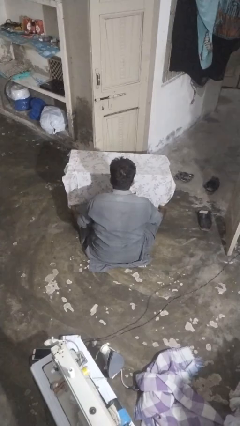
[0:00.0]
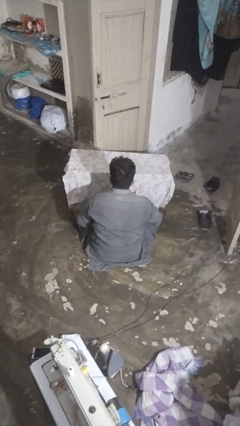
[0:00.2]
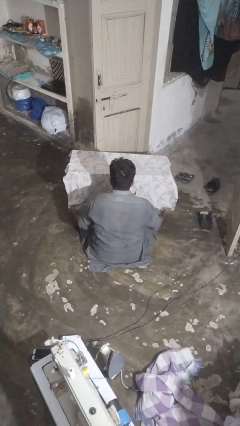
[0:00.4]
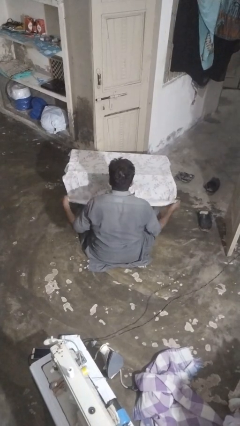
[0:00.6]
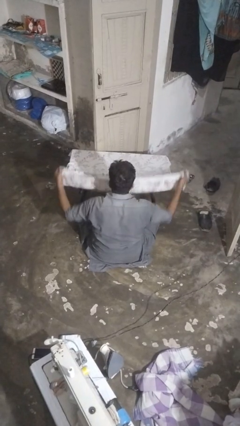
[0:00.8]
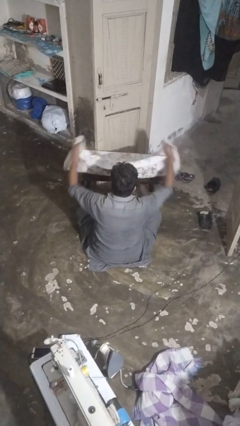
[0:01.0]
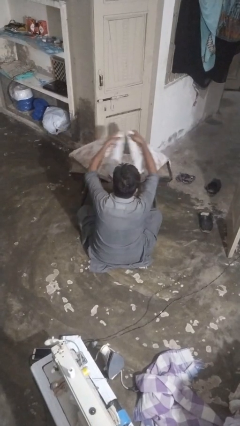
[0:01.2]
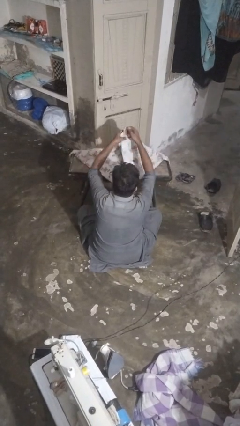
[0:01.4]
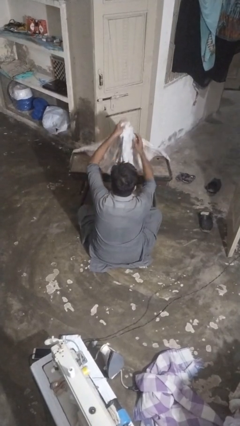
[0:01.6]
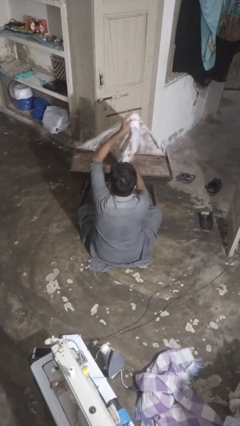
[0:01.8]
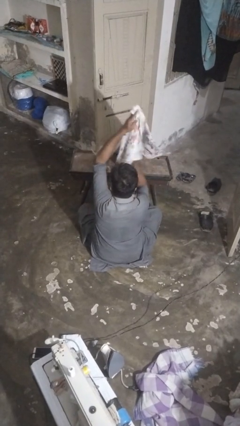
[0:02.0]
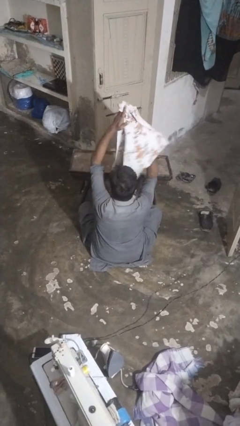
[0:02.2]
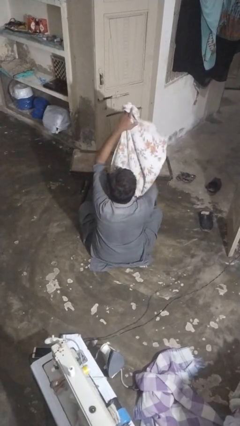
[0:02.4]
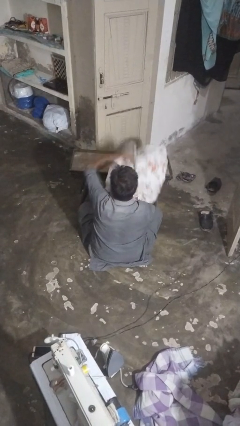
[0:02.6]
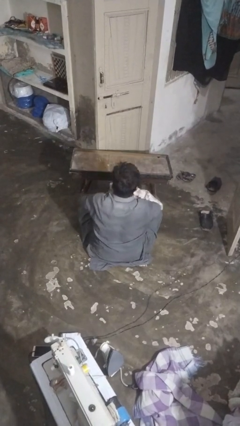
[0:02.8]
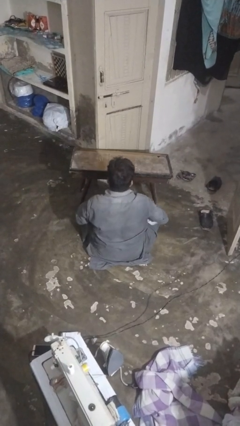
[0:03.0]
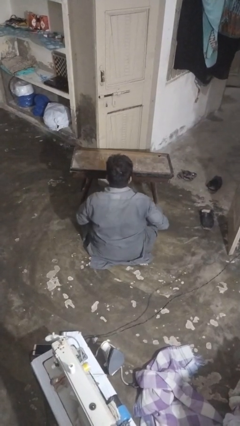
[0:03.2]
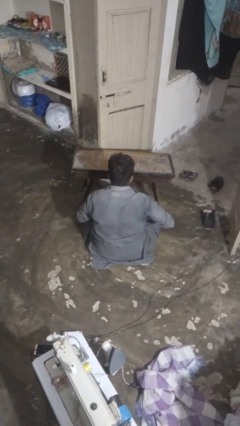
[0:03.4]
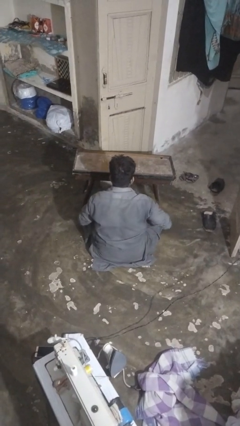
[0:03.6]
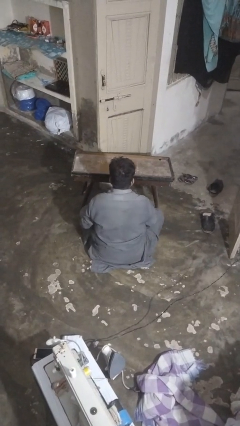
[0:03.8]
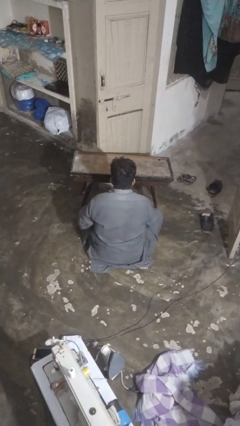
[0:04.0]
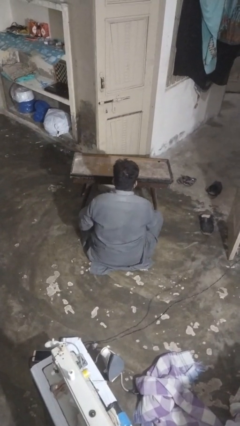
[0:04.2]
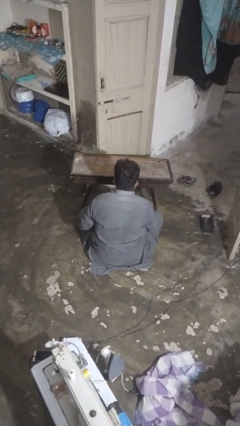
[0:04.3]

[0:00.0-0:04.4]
person folds tablecloth

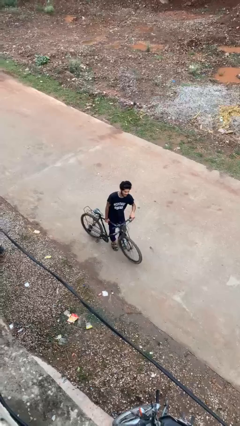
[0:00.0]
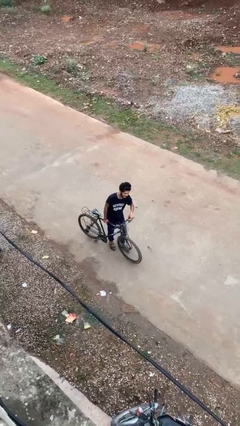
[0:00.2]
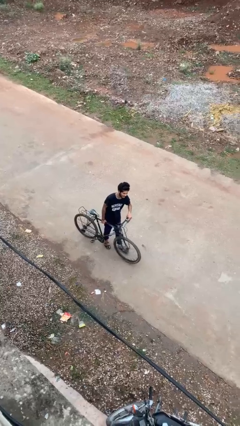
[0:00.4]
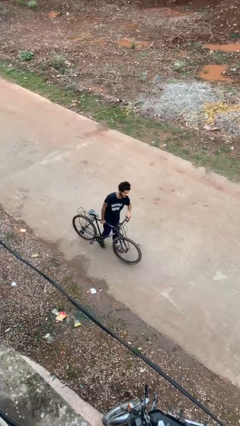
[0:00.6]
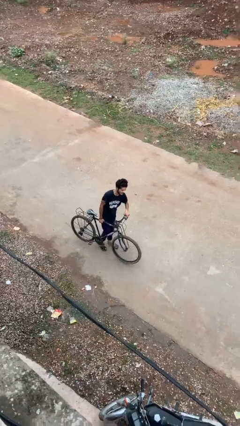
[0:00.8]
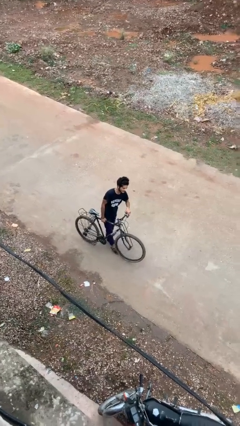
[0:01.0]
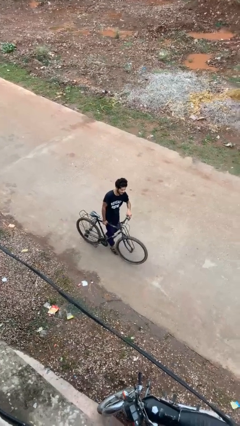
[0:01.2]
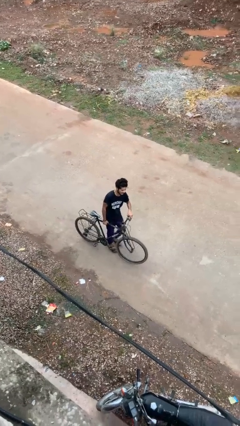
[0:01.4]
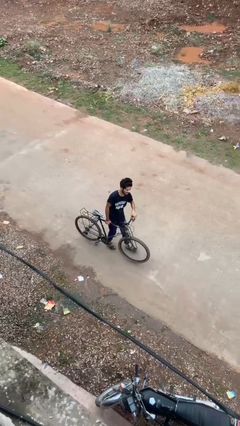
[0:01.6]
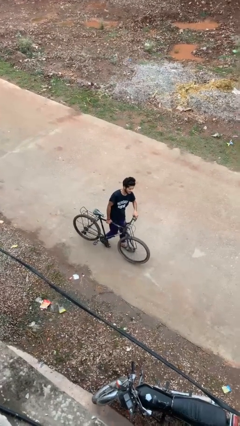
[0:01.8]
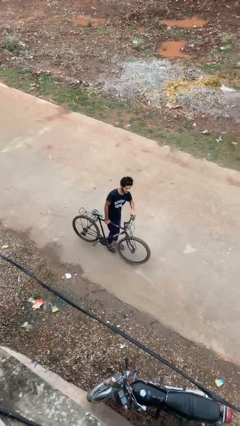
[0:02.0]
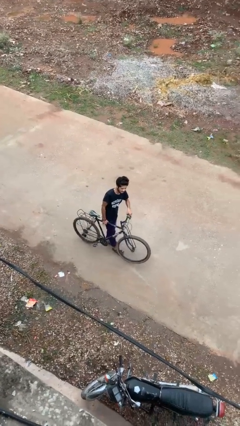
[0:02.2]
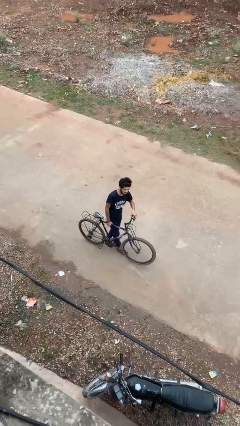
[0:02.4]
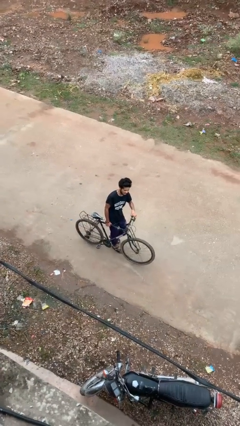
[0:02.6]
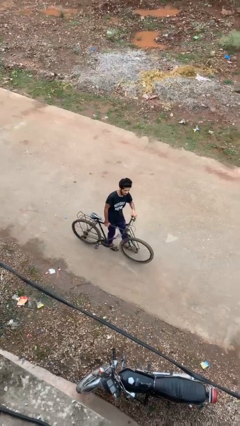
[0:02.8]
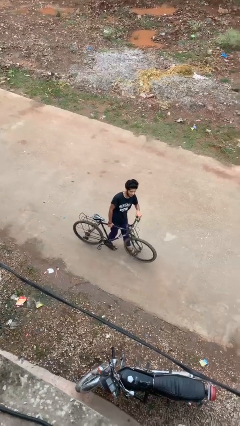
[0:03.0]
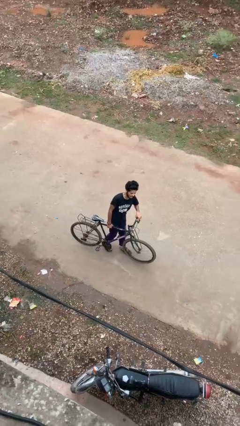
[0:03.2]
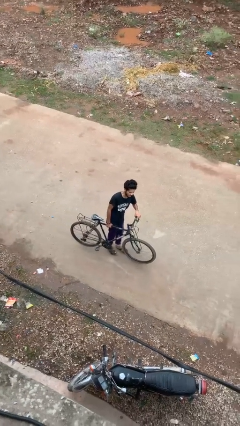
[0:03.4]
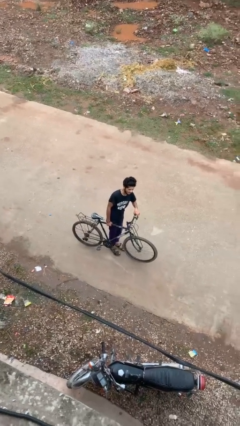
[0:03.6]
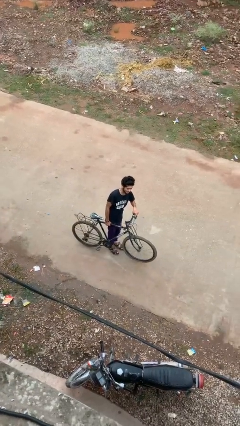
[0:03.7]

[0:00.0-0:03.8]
person carries bicycle

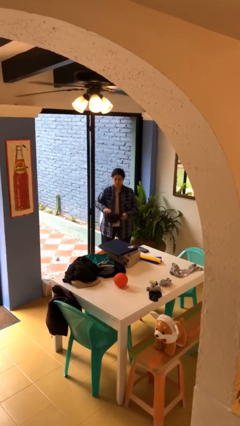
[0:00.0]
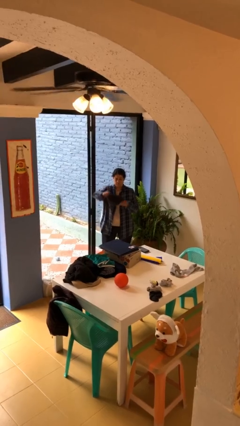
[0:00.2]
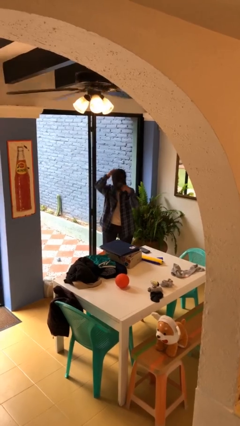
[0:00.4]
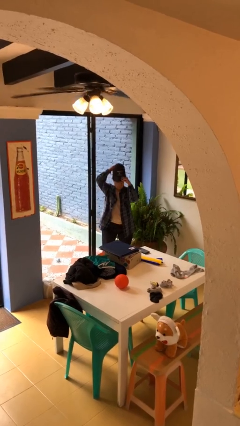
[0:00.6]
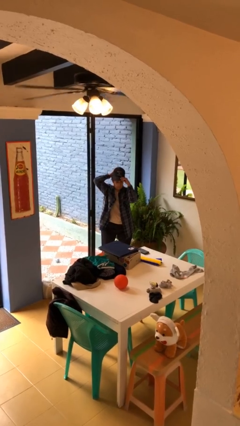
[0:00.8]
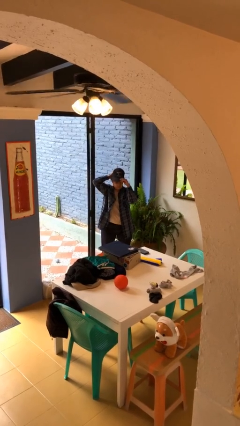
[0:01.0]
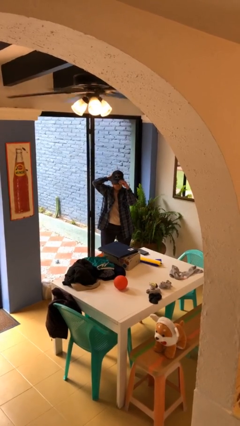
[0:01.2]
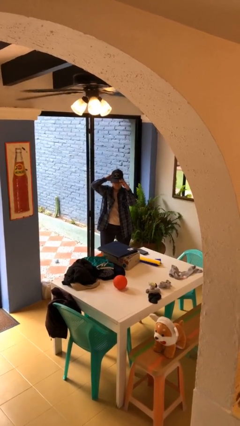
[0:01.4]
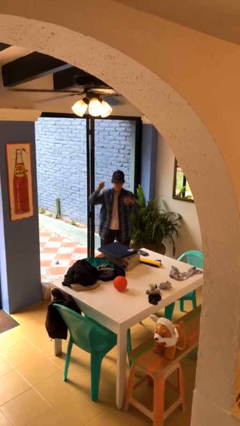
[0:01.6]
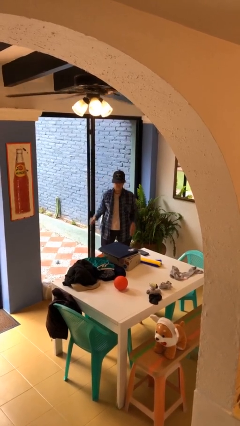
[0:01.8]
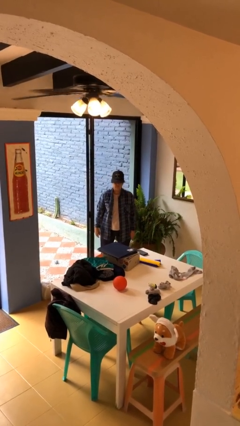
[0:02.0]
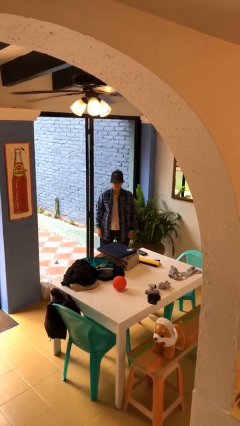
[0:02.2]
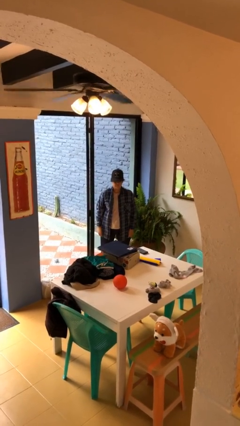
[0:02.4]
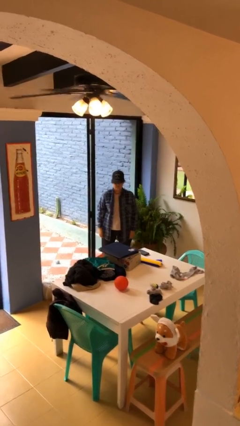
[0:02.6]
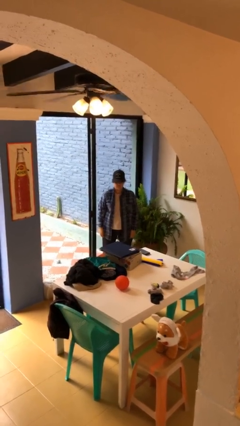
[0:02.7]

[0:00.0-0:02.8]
person puts on hat

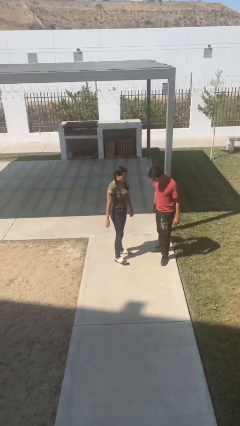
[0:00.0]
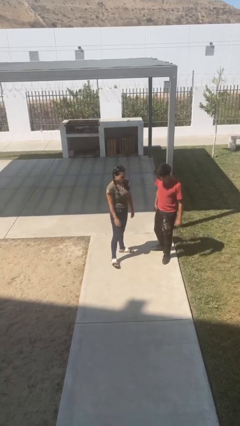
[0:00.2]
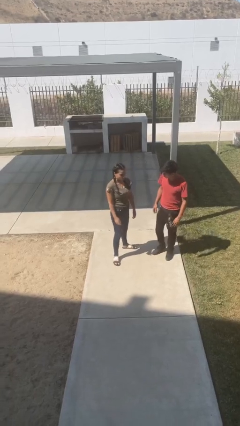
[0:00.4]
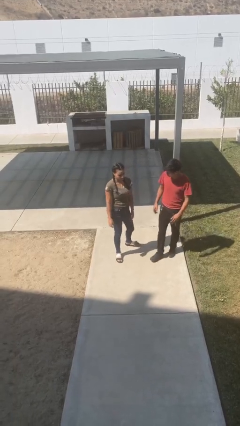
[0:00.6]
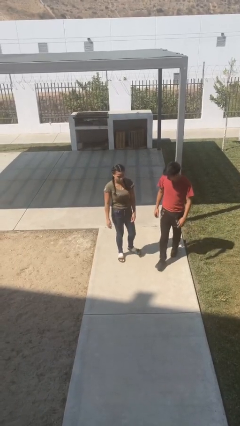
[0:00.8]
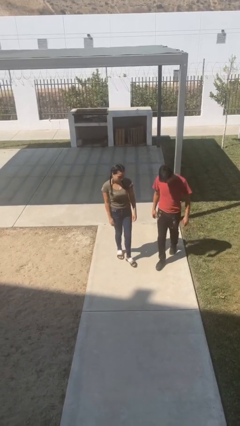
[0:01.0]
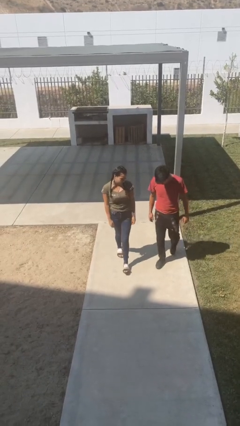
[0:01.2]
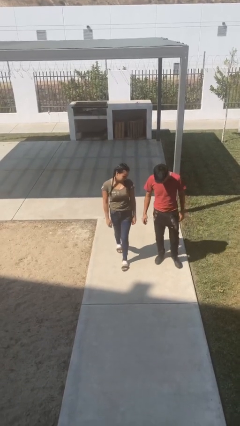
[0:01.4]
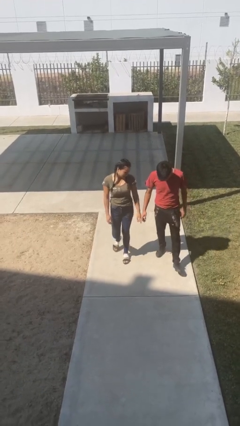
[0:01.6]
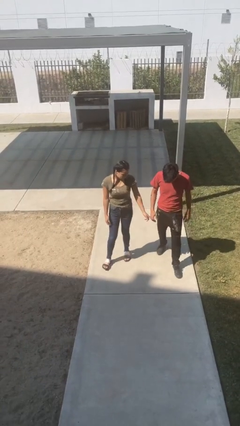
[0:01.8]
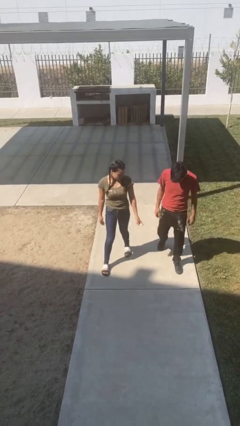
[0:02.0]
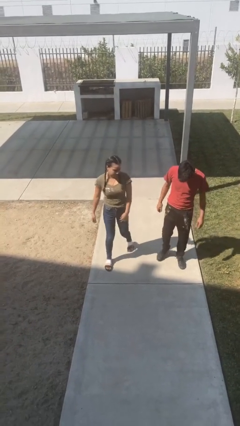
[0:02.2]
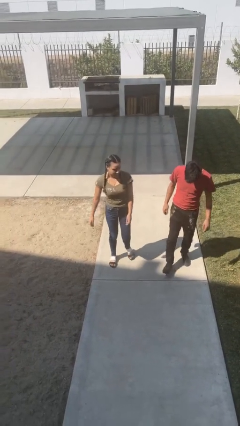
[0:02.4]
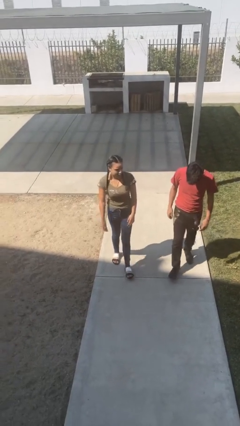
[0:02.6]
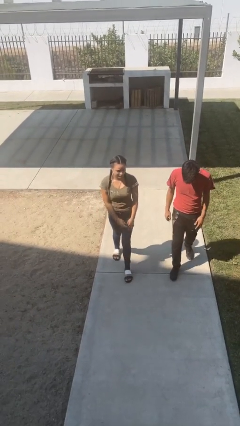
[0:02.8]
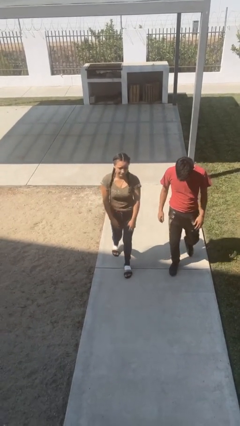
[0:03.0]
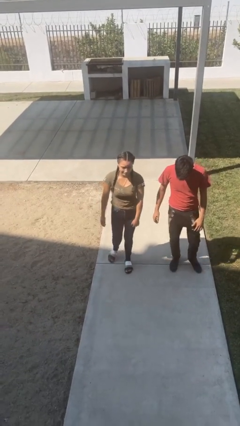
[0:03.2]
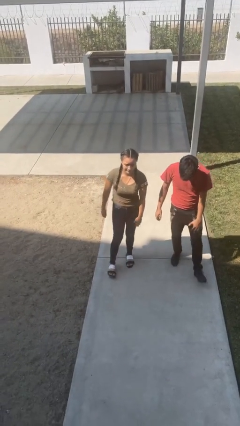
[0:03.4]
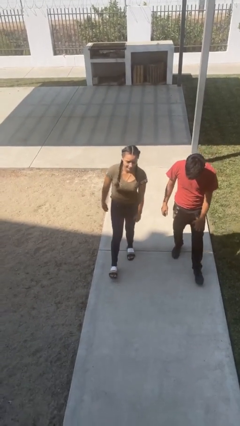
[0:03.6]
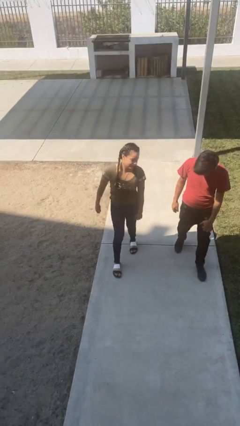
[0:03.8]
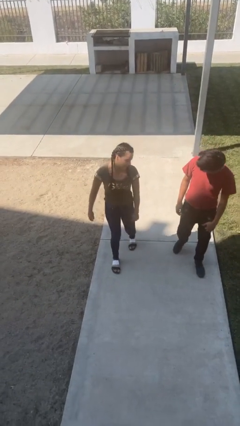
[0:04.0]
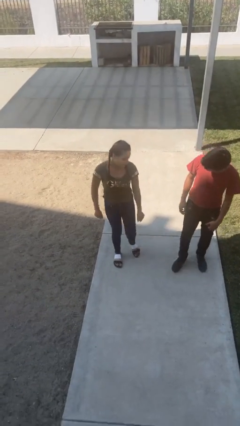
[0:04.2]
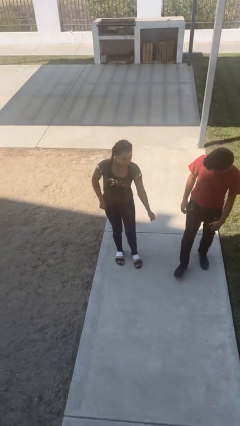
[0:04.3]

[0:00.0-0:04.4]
person talks to person

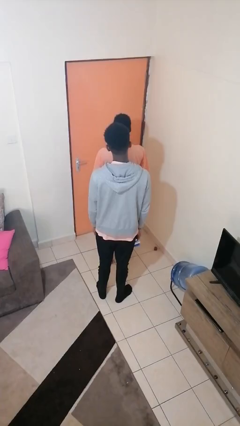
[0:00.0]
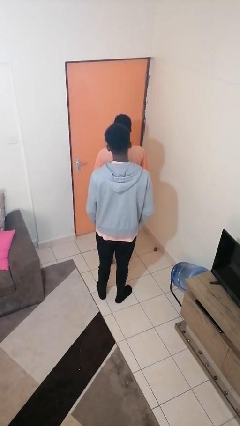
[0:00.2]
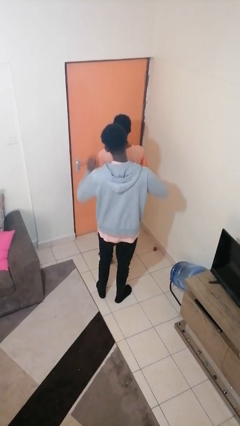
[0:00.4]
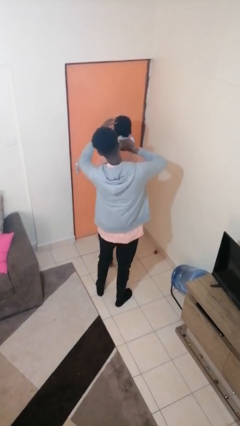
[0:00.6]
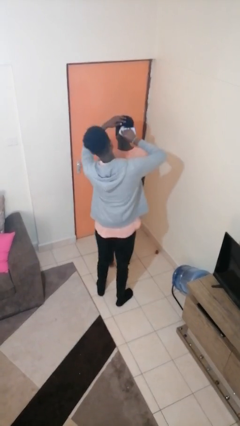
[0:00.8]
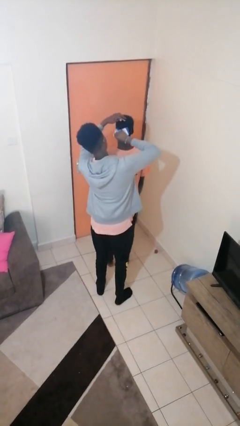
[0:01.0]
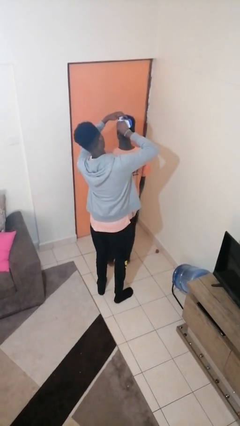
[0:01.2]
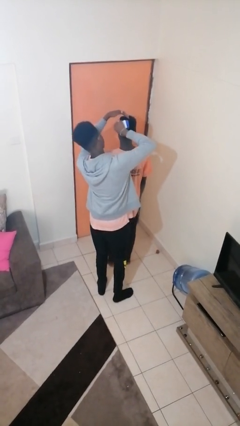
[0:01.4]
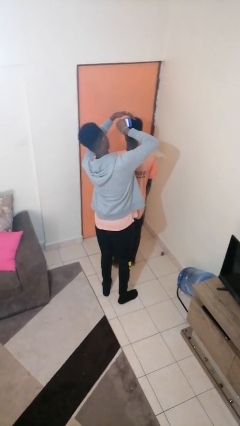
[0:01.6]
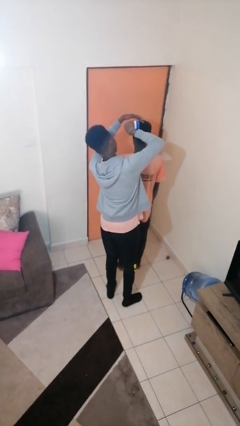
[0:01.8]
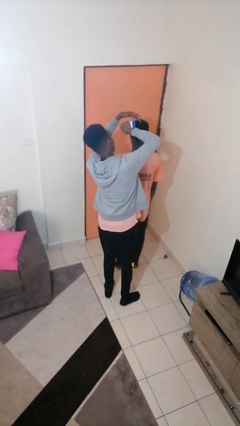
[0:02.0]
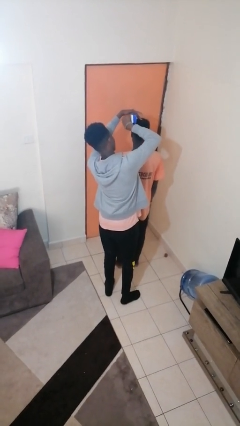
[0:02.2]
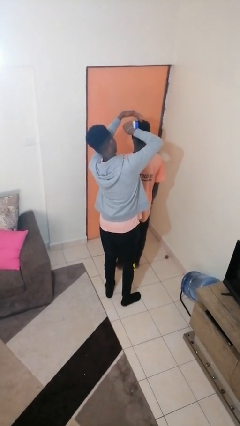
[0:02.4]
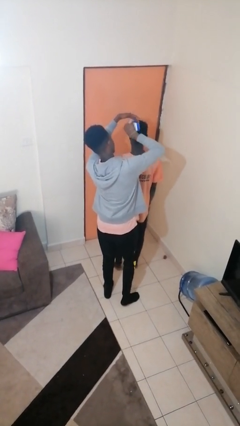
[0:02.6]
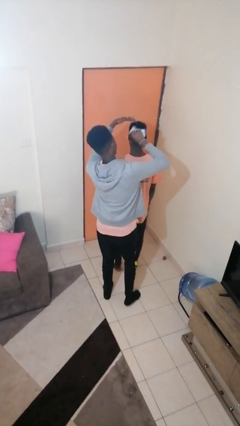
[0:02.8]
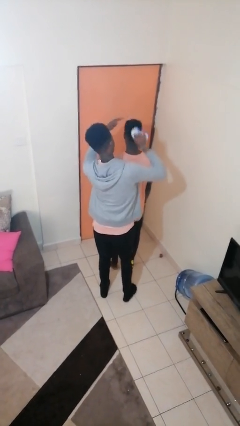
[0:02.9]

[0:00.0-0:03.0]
person brushes hair of person
